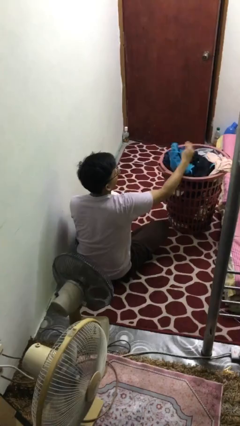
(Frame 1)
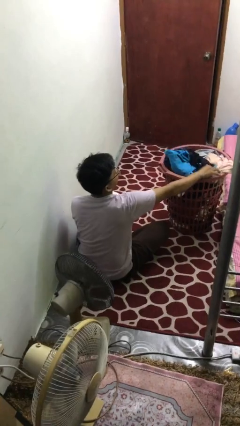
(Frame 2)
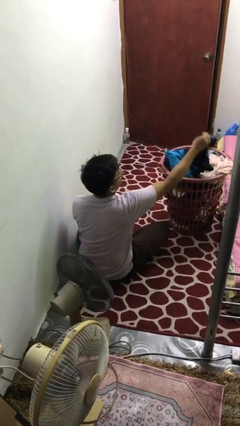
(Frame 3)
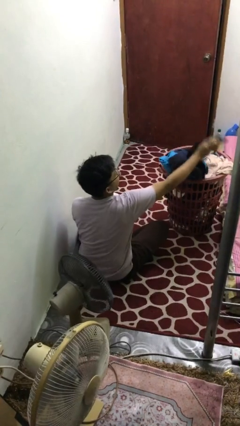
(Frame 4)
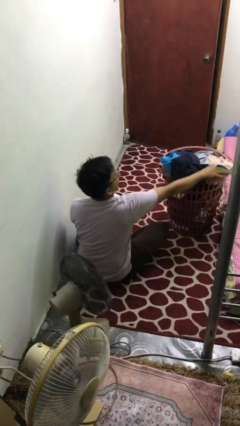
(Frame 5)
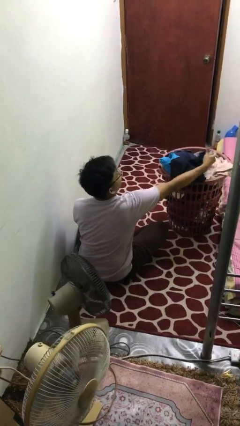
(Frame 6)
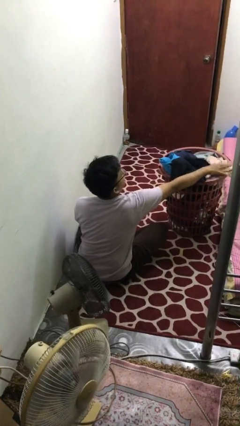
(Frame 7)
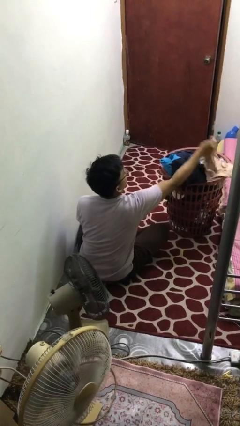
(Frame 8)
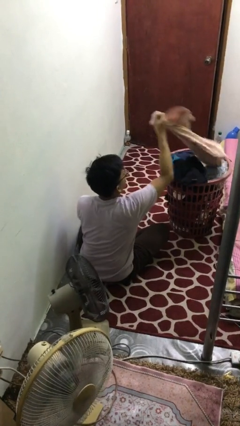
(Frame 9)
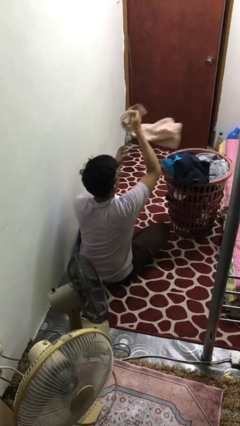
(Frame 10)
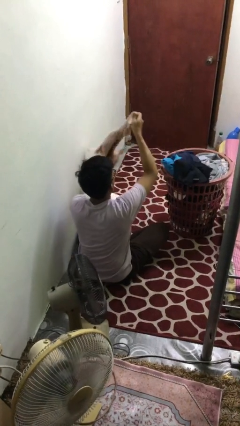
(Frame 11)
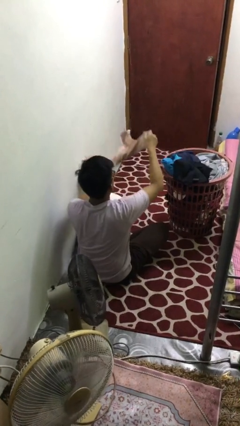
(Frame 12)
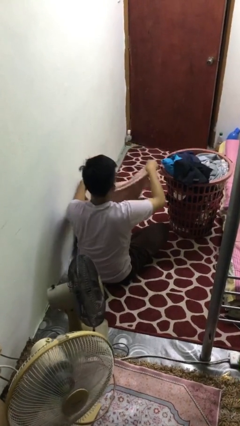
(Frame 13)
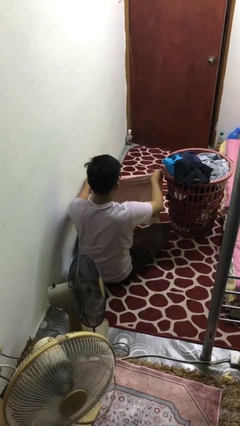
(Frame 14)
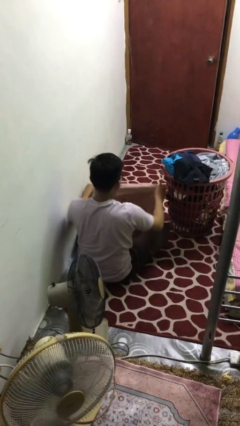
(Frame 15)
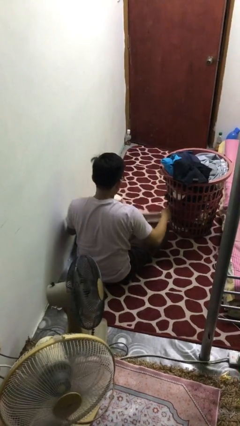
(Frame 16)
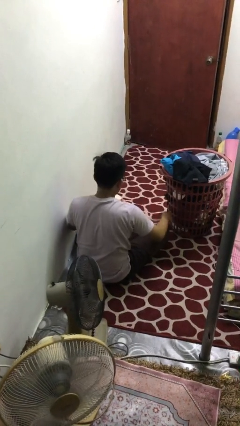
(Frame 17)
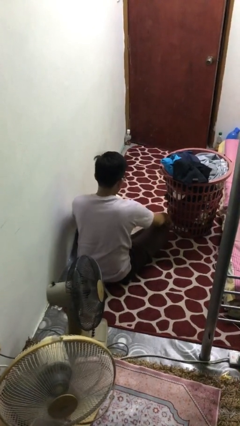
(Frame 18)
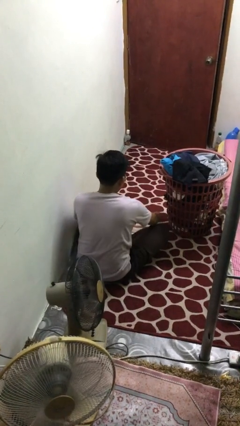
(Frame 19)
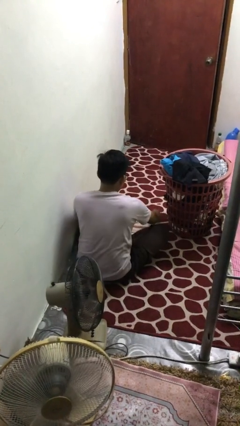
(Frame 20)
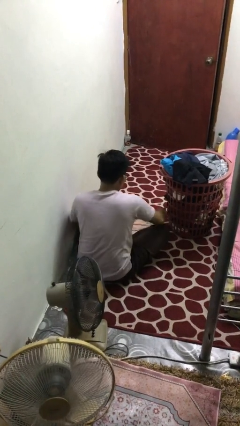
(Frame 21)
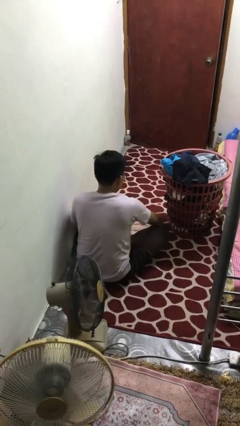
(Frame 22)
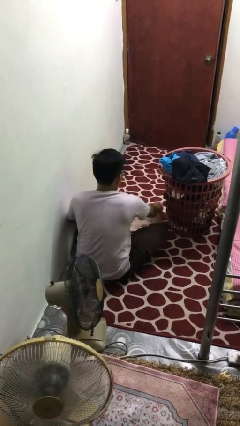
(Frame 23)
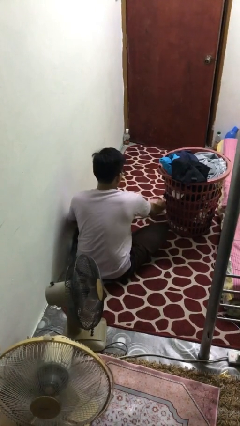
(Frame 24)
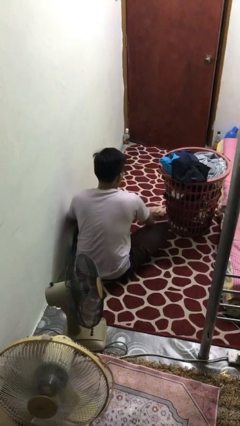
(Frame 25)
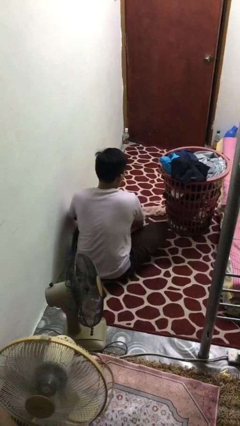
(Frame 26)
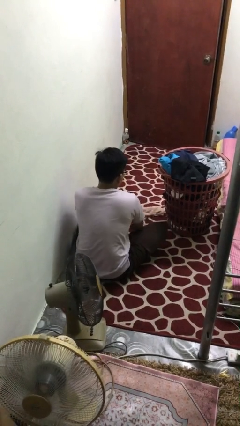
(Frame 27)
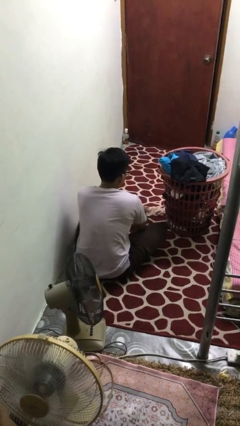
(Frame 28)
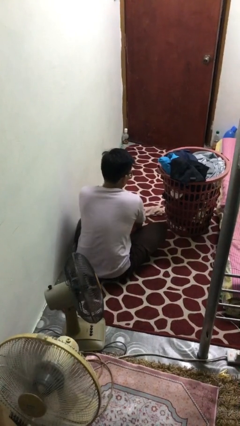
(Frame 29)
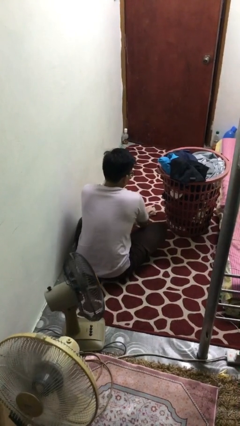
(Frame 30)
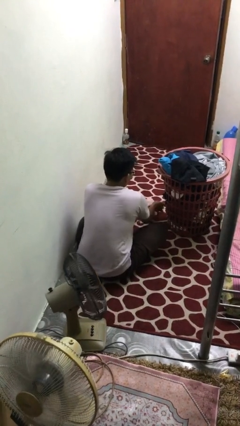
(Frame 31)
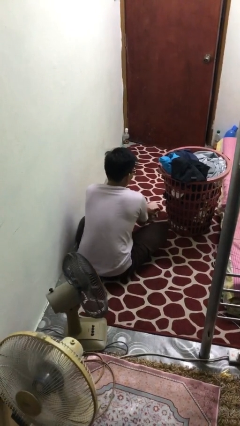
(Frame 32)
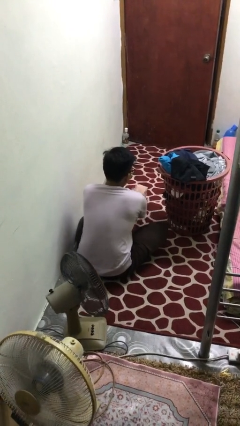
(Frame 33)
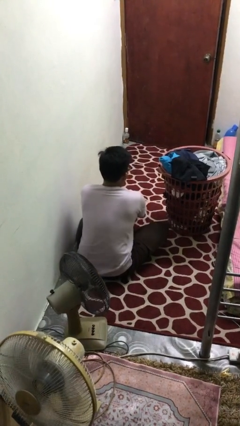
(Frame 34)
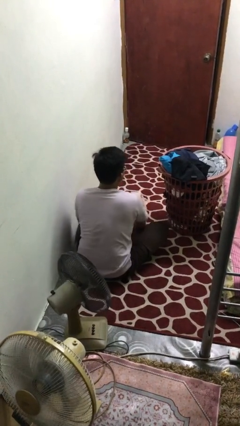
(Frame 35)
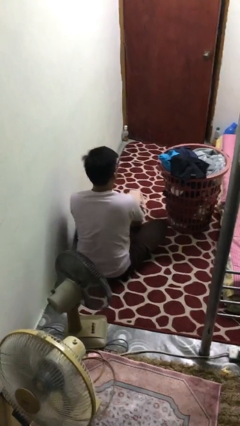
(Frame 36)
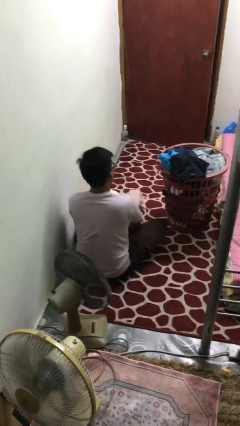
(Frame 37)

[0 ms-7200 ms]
person folds shirt

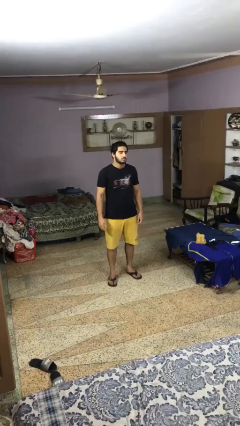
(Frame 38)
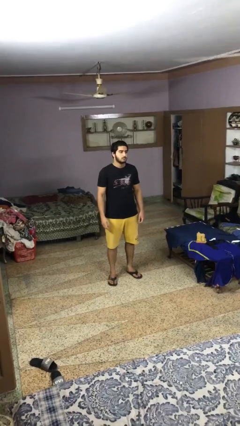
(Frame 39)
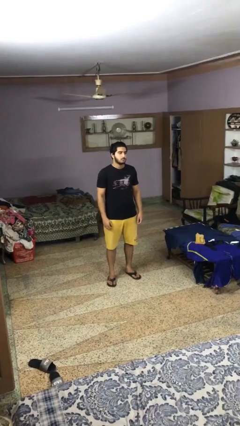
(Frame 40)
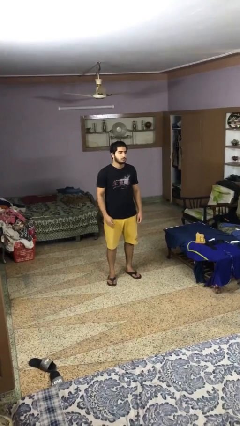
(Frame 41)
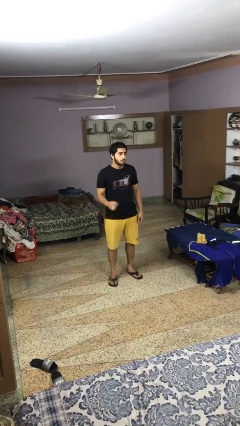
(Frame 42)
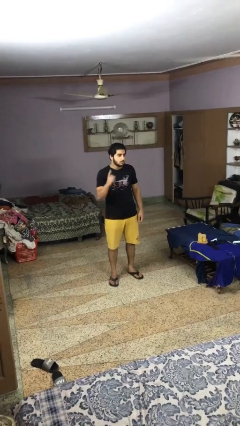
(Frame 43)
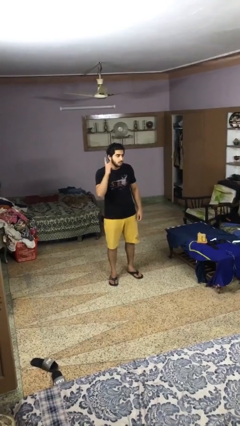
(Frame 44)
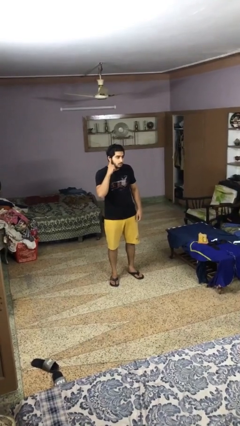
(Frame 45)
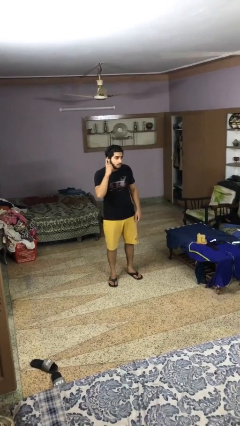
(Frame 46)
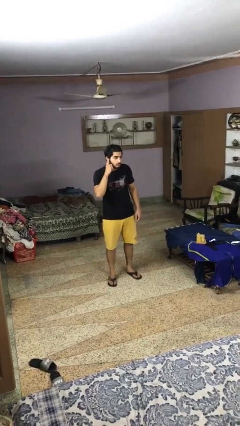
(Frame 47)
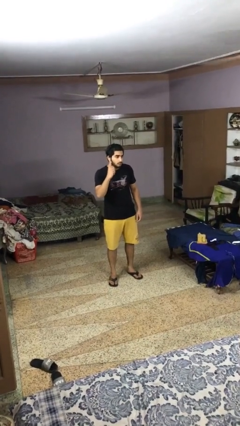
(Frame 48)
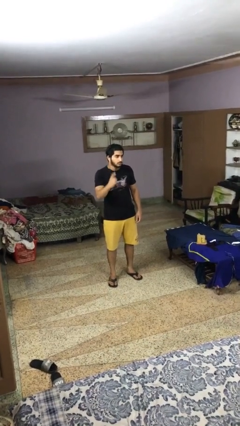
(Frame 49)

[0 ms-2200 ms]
person gestures listen closely

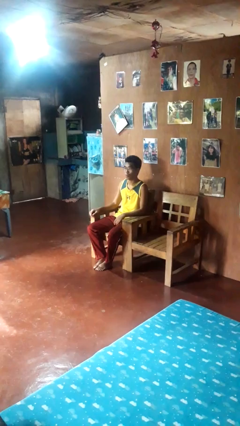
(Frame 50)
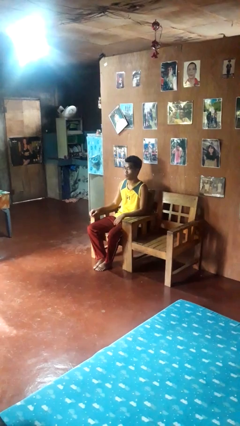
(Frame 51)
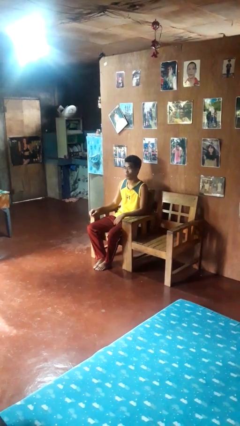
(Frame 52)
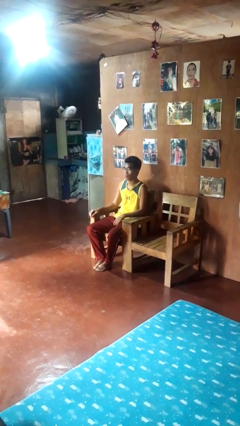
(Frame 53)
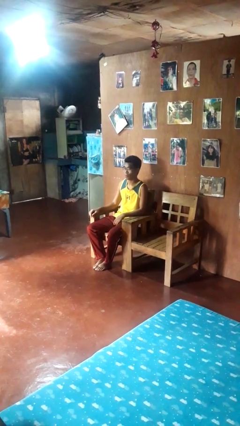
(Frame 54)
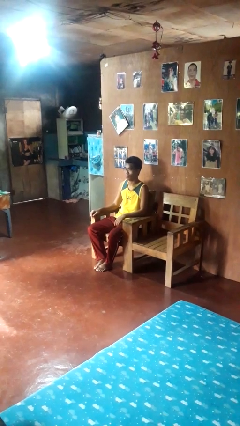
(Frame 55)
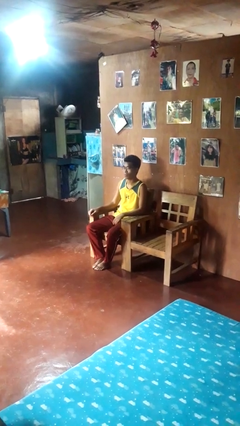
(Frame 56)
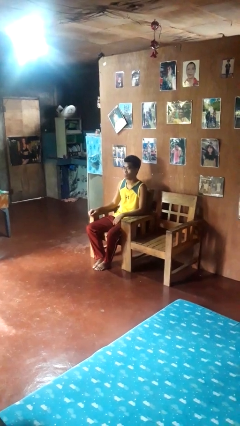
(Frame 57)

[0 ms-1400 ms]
person shakes head

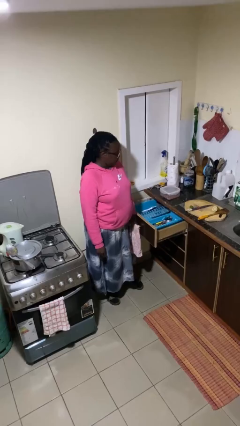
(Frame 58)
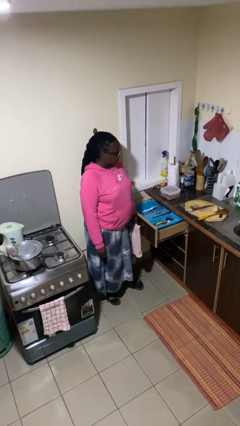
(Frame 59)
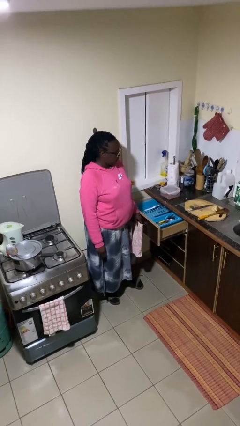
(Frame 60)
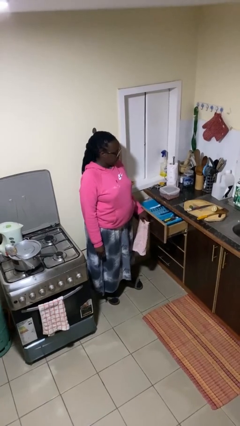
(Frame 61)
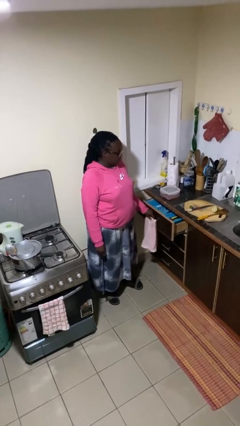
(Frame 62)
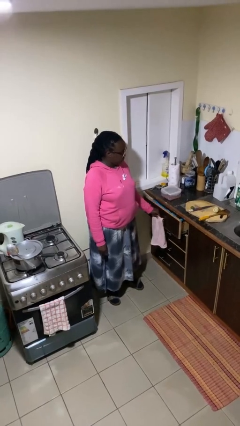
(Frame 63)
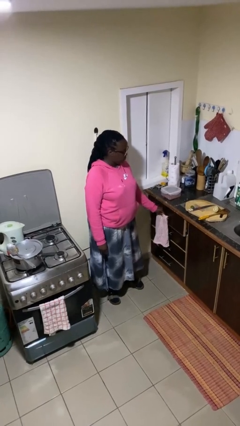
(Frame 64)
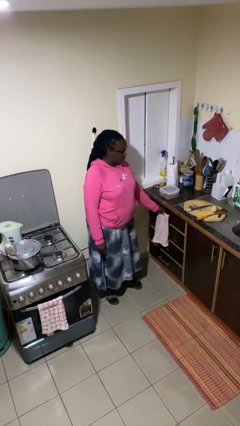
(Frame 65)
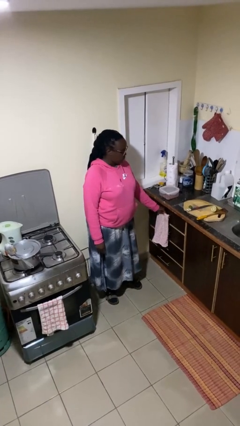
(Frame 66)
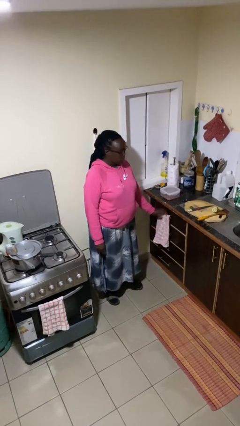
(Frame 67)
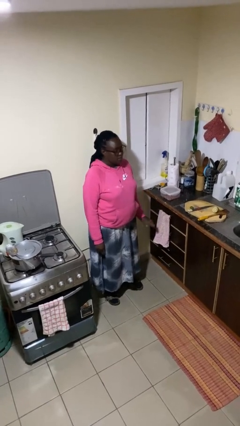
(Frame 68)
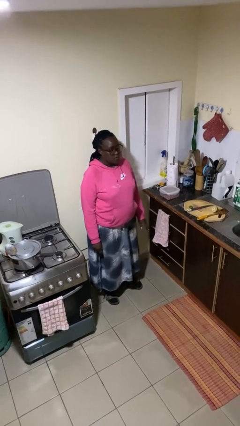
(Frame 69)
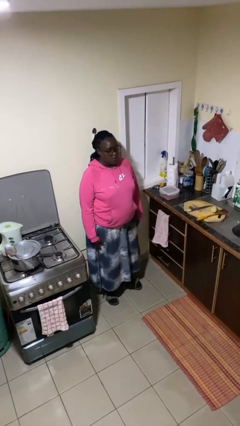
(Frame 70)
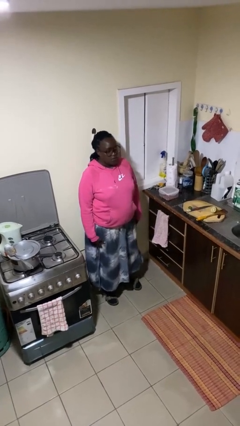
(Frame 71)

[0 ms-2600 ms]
person closes kitchen drawer

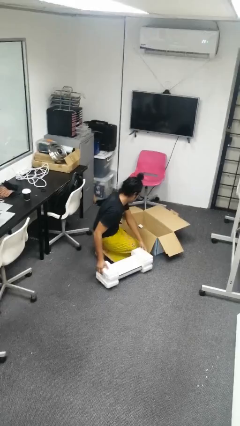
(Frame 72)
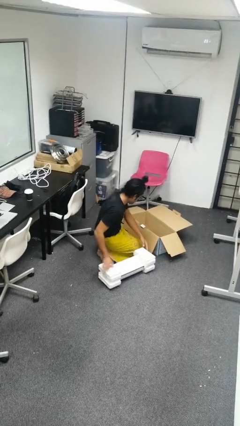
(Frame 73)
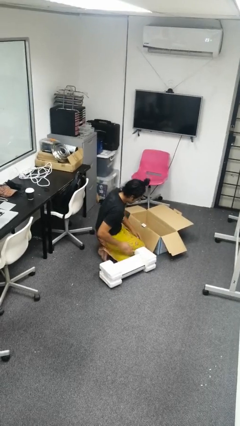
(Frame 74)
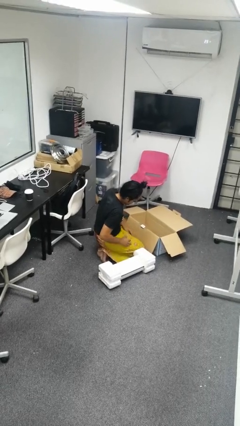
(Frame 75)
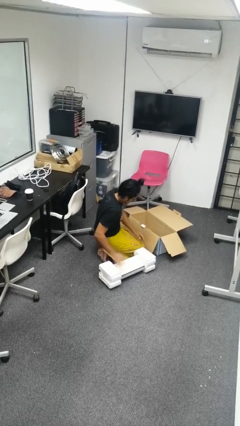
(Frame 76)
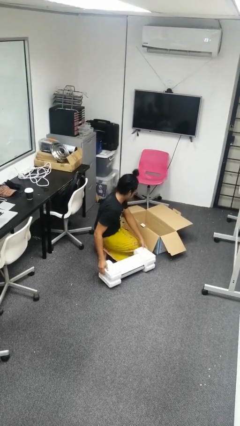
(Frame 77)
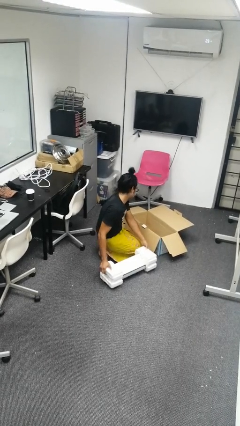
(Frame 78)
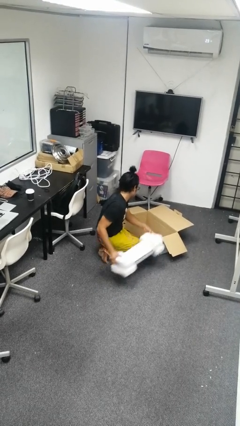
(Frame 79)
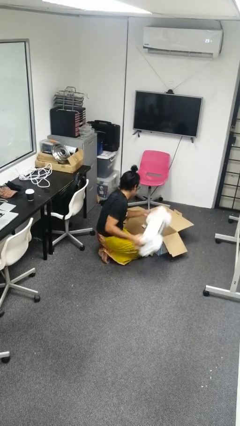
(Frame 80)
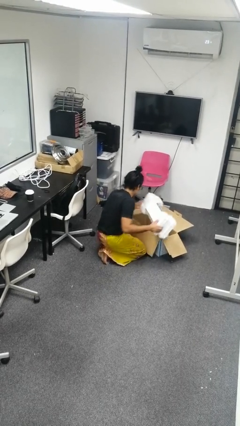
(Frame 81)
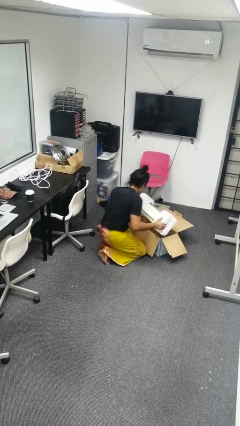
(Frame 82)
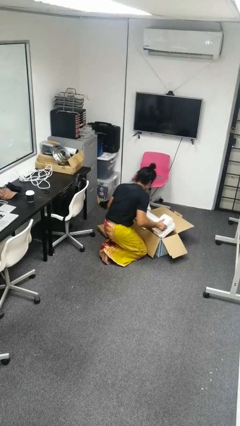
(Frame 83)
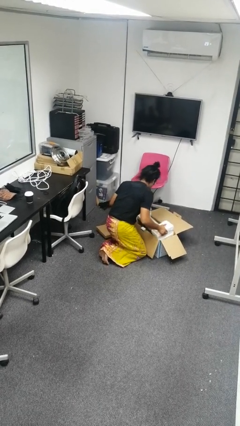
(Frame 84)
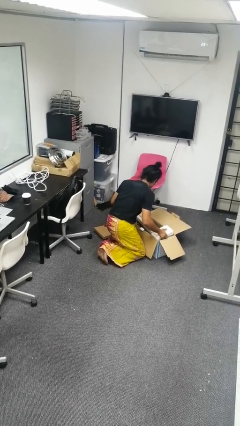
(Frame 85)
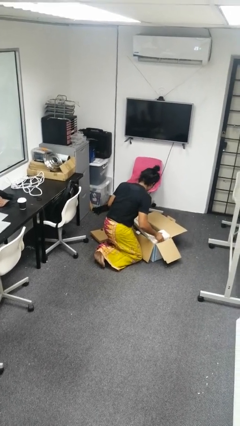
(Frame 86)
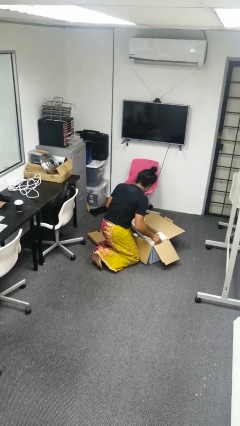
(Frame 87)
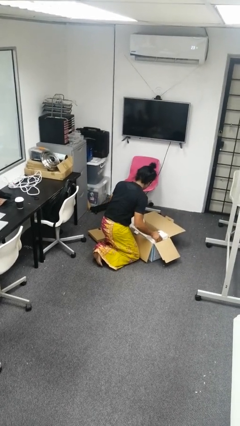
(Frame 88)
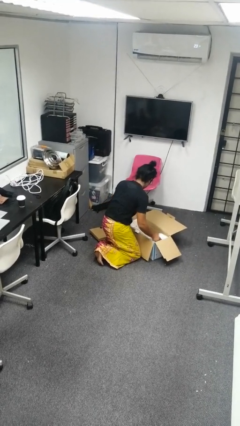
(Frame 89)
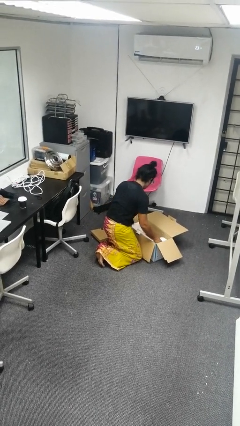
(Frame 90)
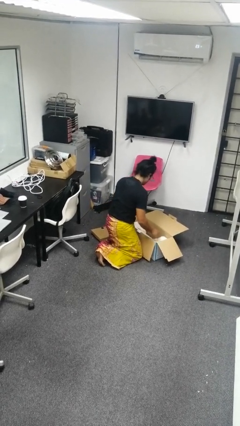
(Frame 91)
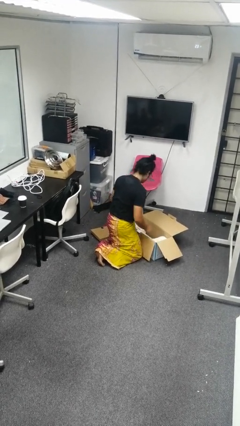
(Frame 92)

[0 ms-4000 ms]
person puts object into box
